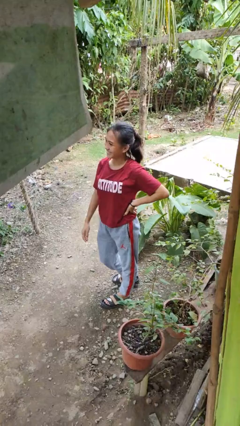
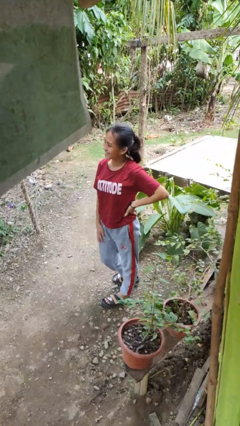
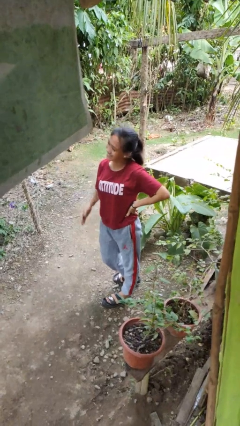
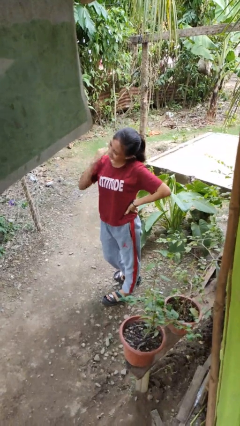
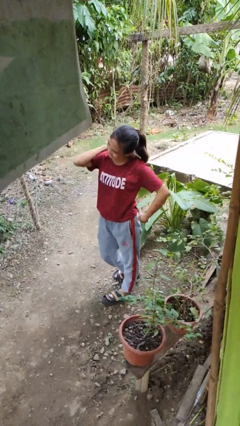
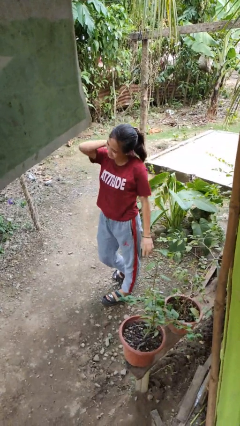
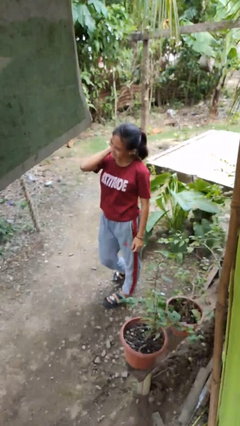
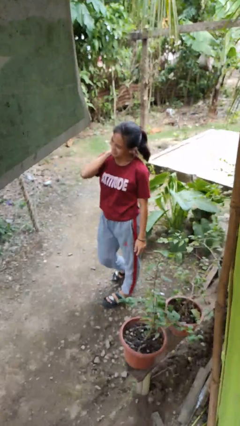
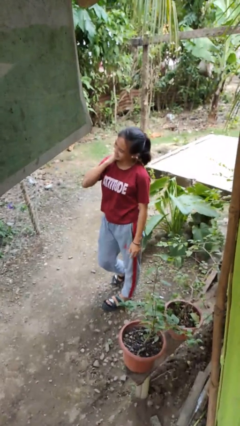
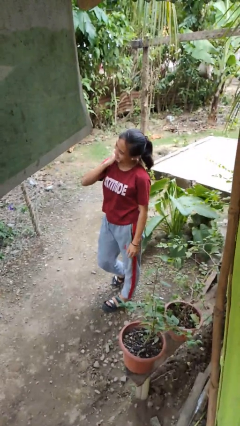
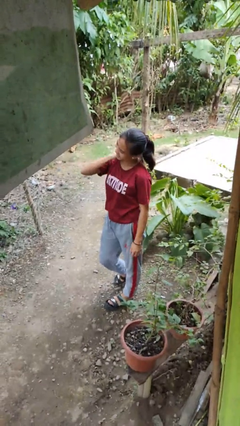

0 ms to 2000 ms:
person rubs neck

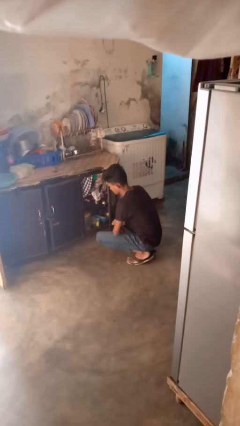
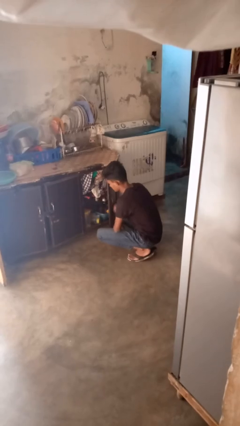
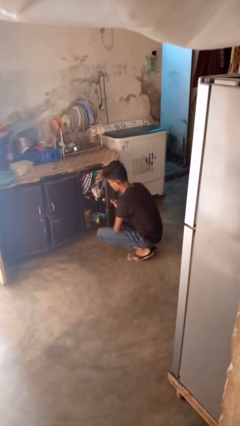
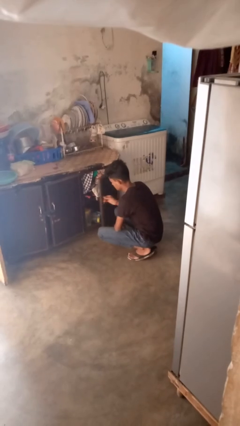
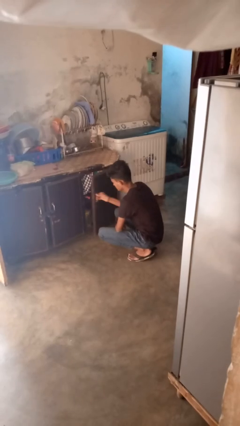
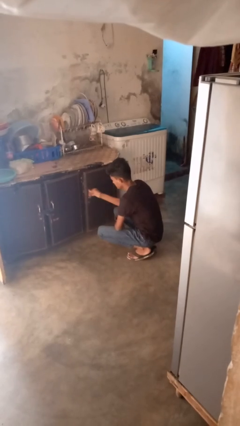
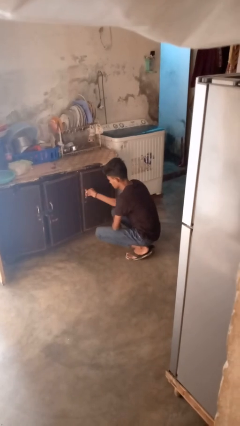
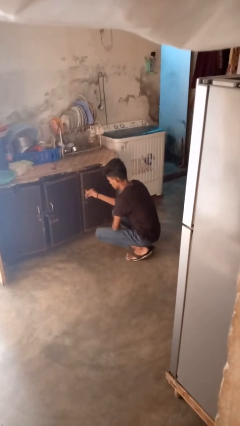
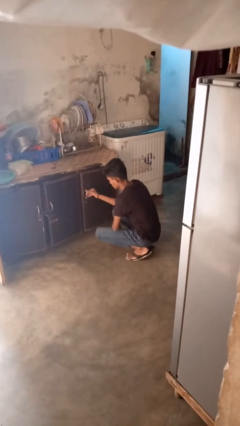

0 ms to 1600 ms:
person closes cabinet

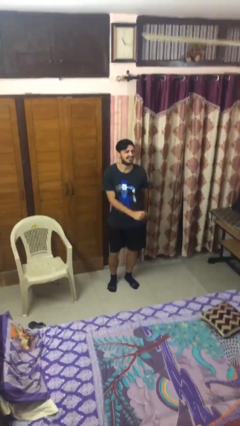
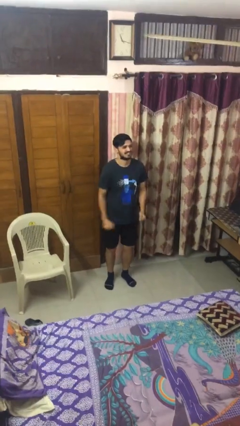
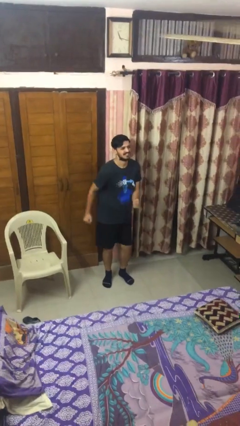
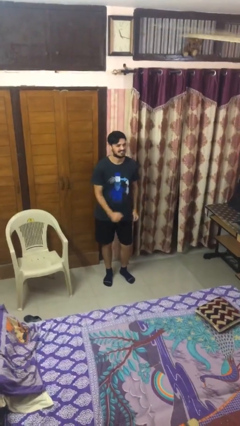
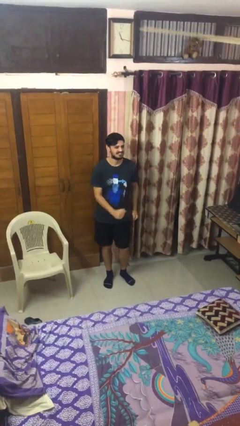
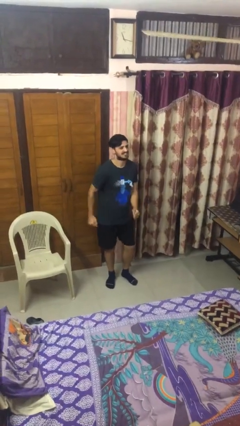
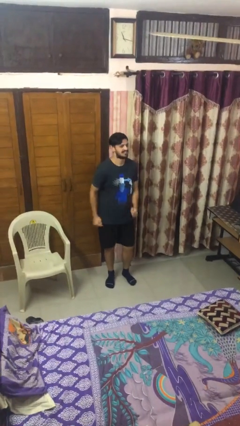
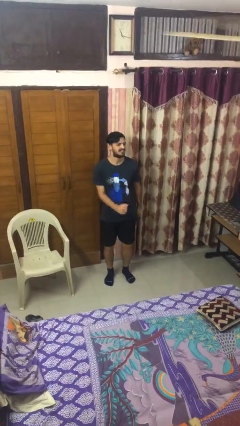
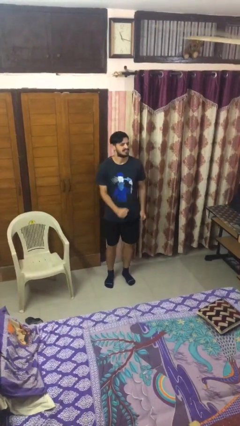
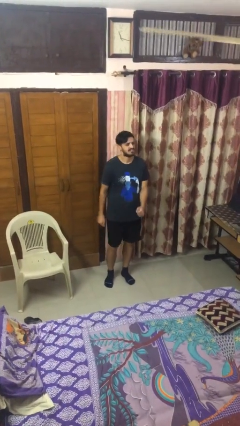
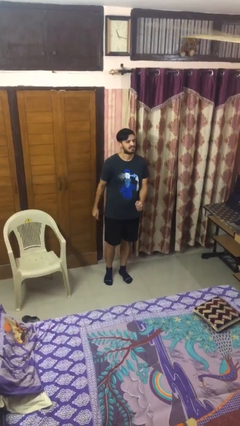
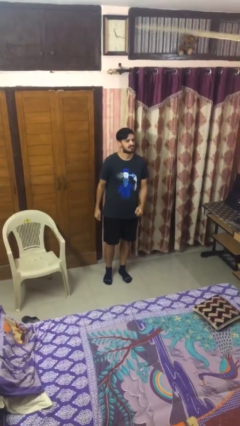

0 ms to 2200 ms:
person dances in place

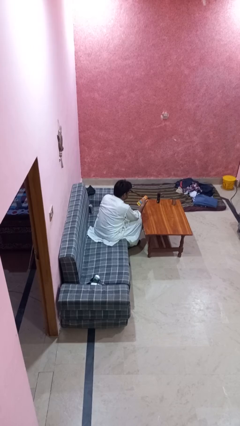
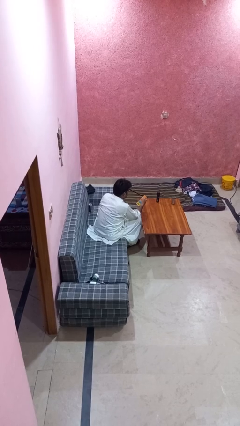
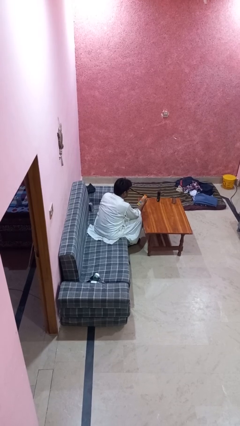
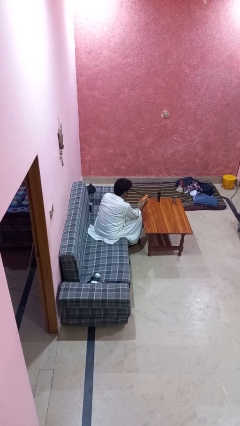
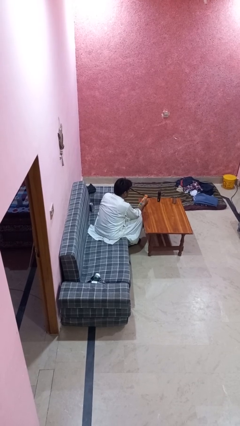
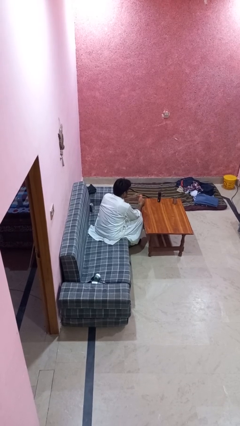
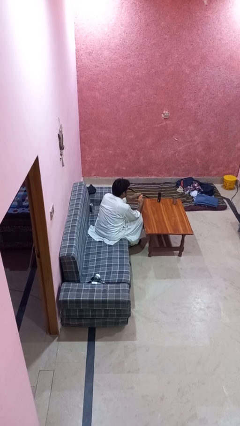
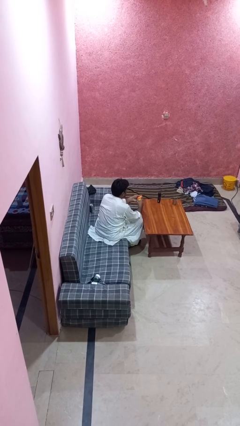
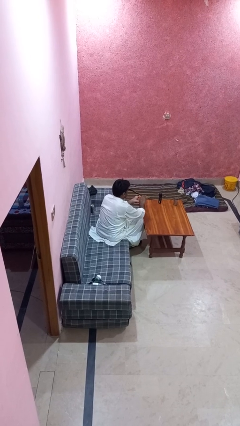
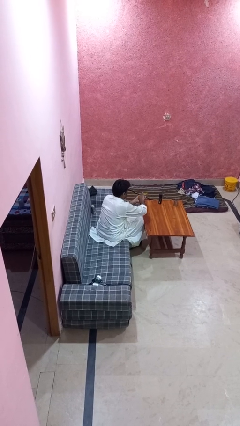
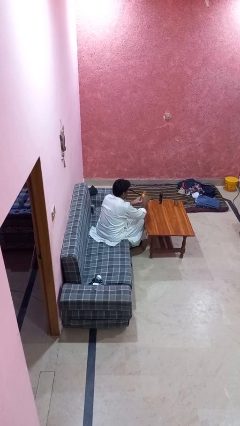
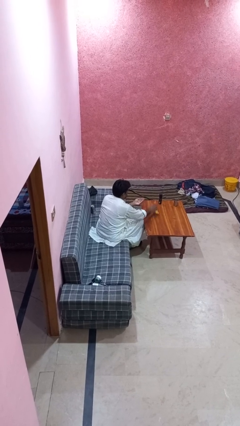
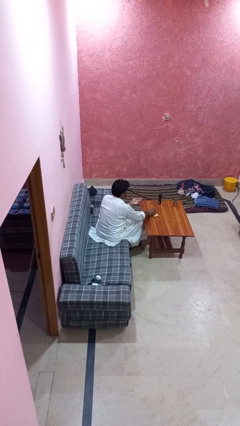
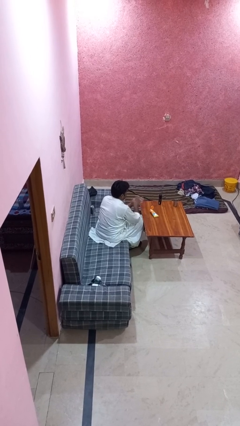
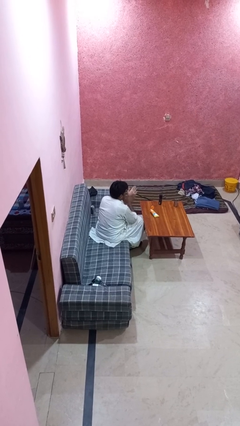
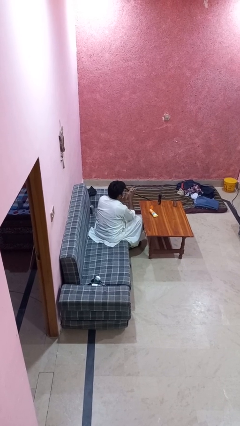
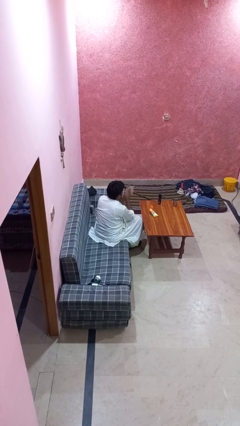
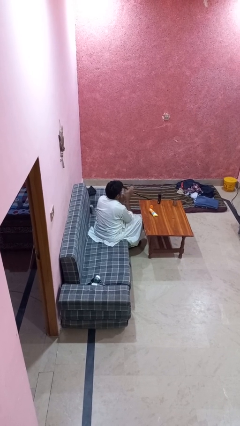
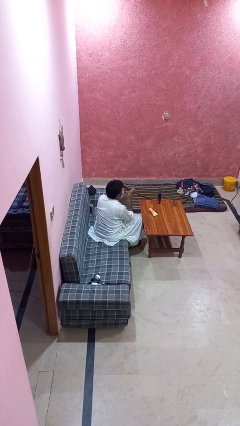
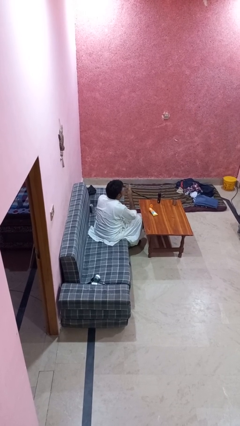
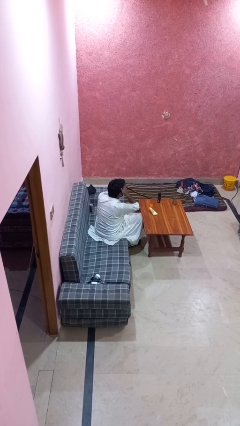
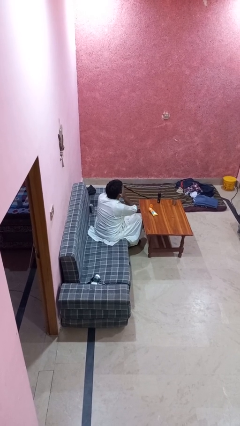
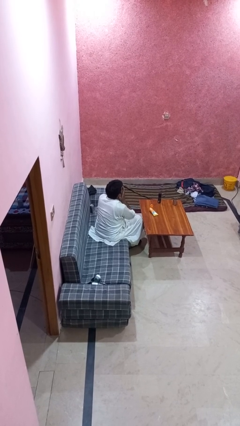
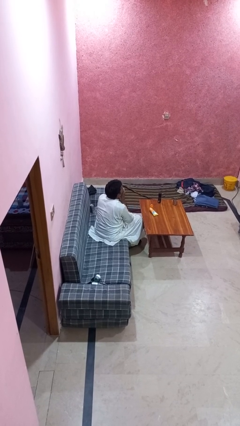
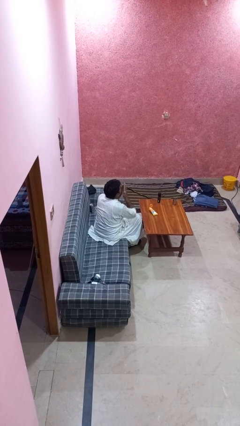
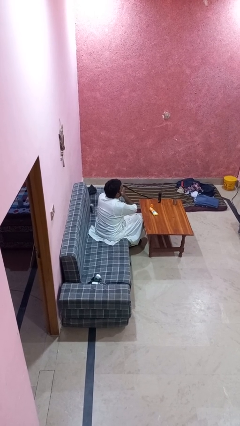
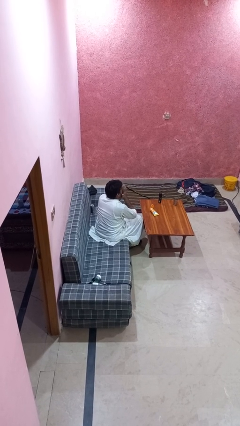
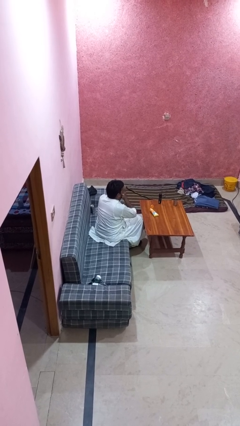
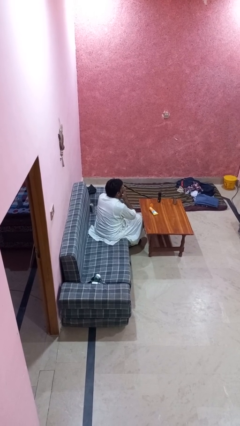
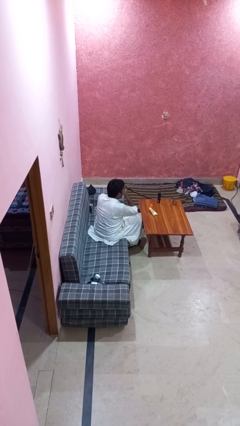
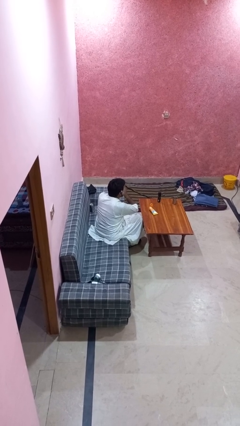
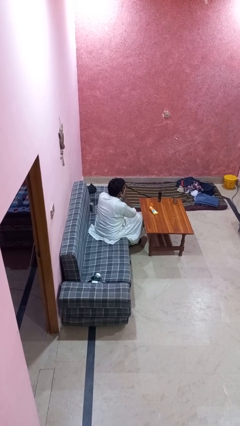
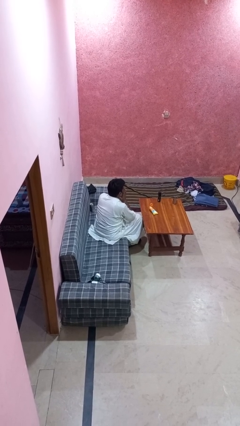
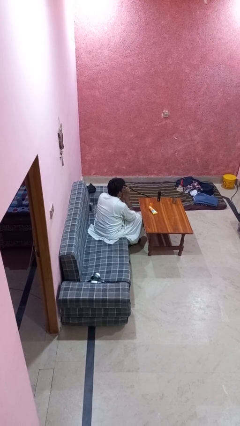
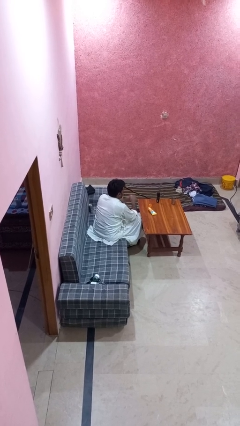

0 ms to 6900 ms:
person applies sunscreen

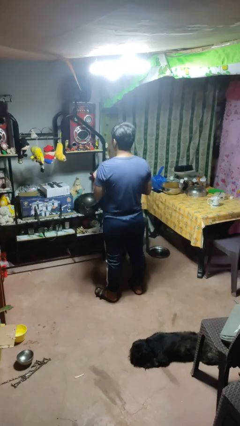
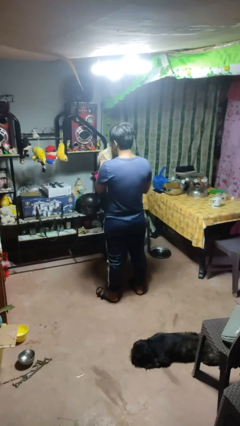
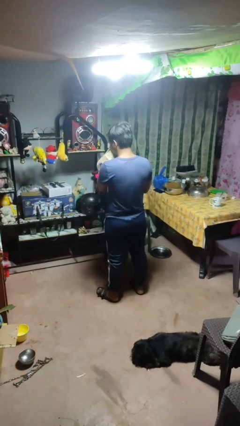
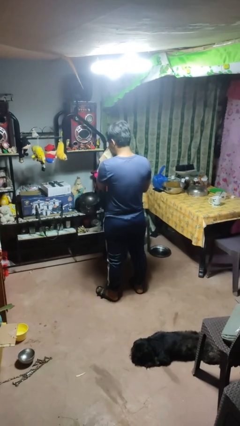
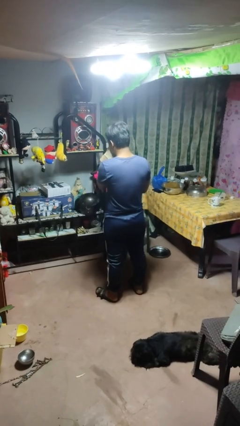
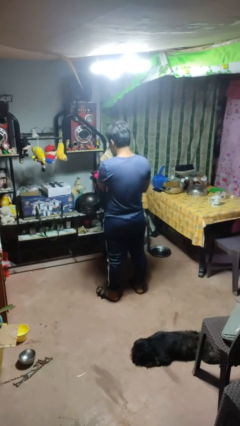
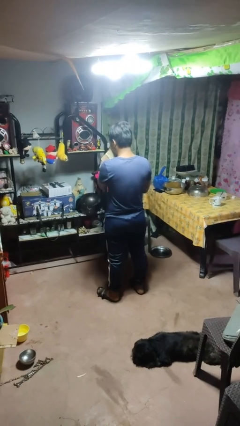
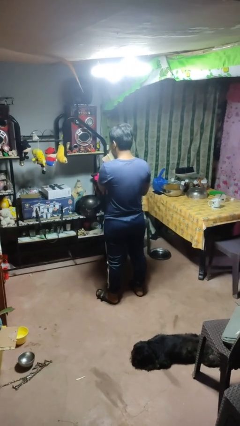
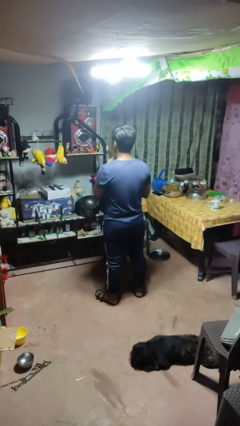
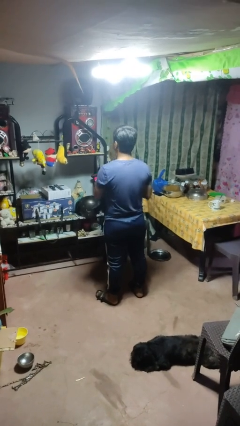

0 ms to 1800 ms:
person blows nose

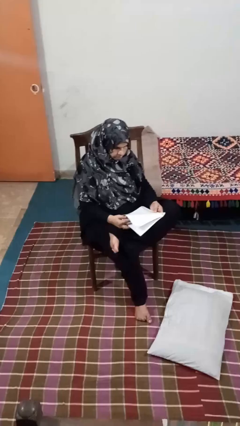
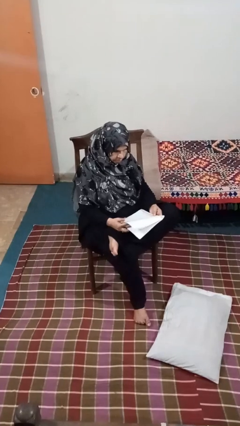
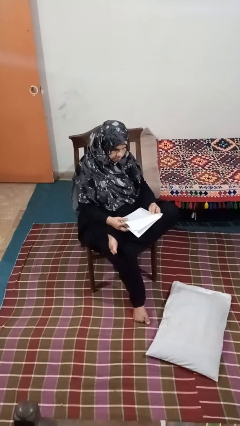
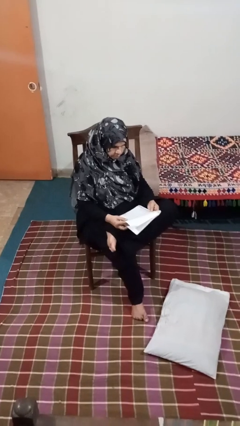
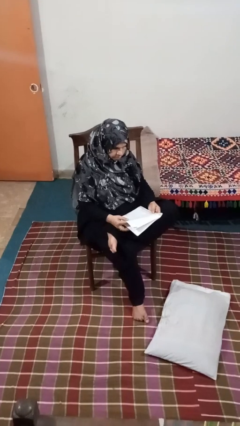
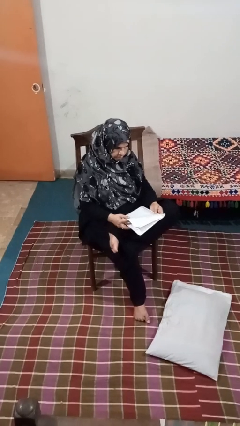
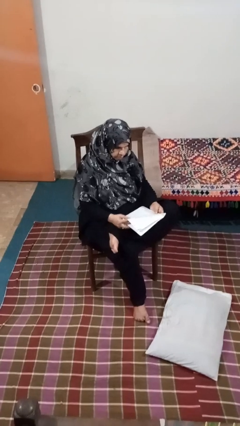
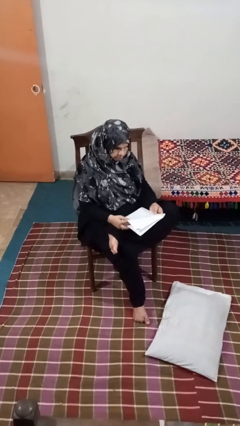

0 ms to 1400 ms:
person reads newspaper

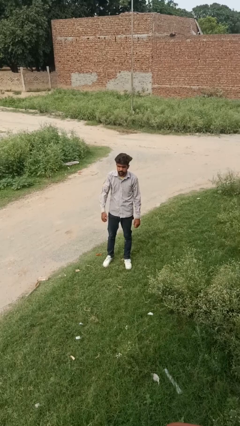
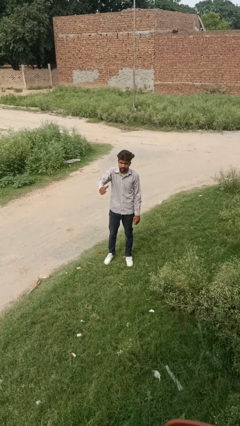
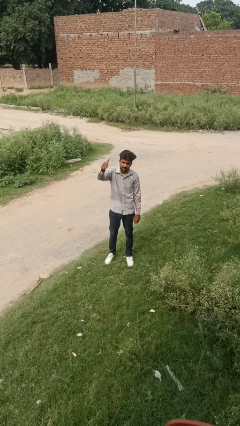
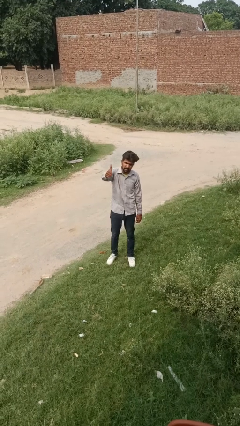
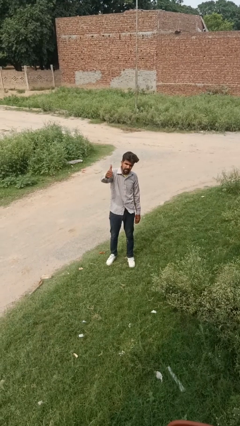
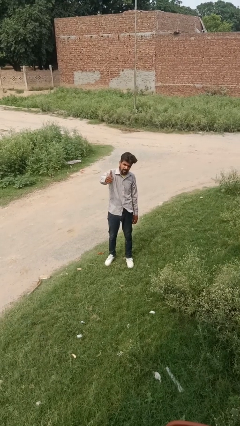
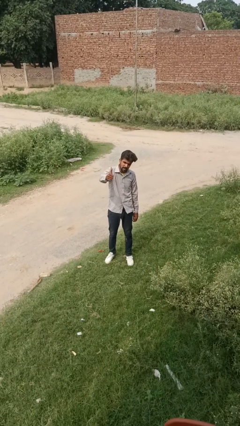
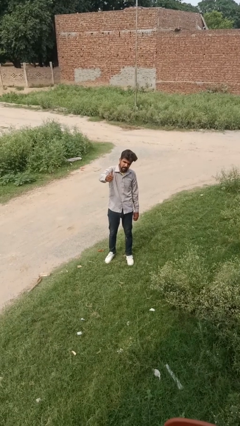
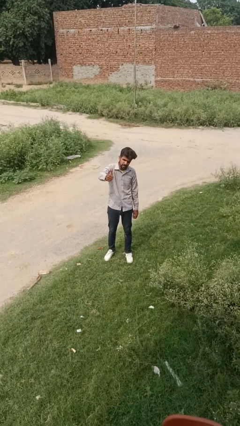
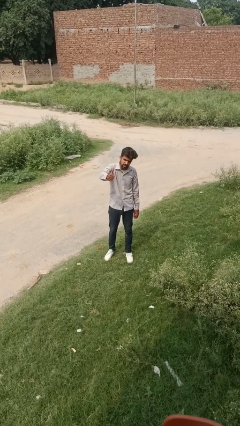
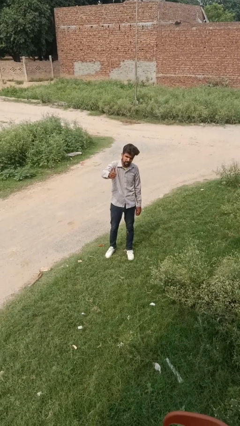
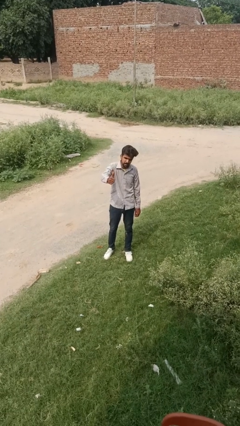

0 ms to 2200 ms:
person gestures thumbs up
